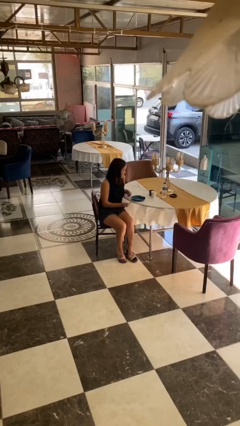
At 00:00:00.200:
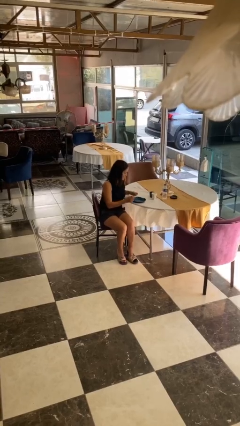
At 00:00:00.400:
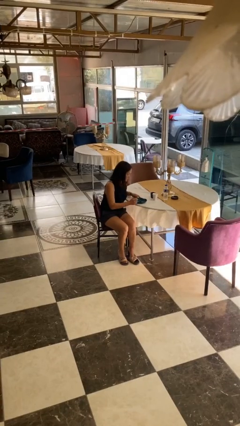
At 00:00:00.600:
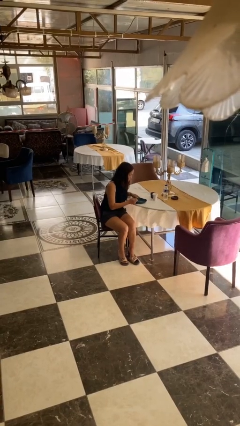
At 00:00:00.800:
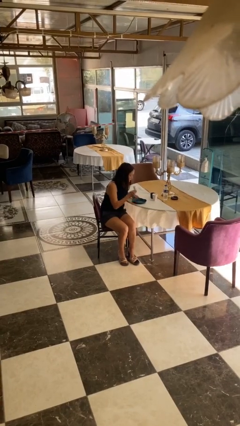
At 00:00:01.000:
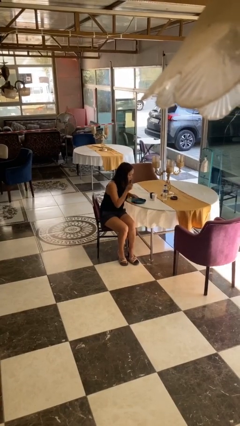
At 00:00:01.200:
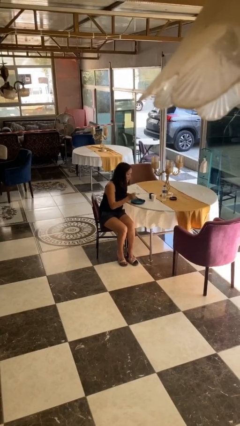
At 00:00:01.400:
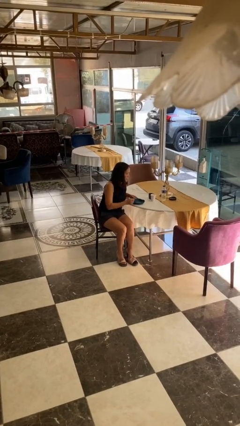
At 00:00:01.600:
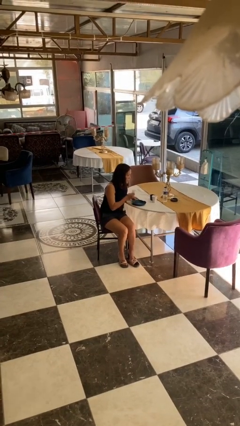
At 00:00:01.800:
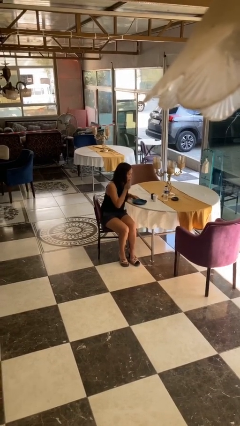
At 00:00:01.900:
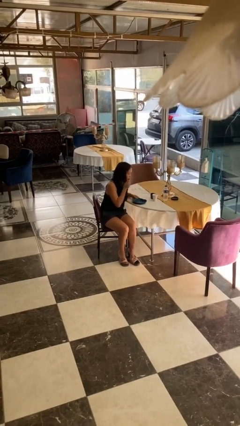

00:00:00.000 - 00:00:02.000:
person eats with utensil

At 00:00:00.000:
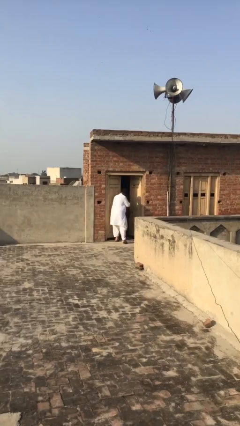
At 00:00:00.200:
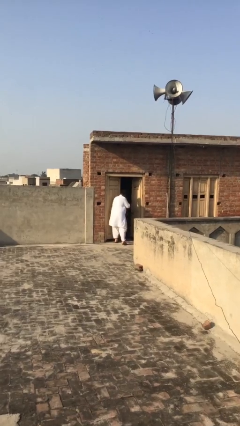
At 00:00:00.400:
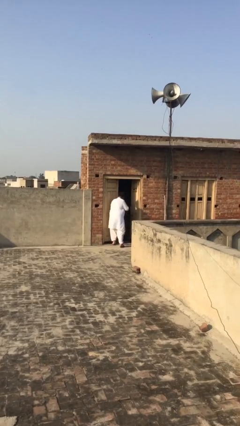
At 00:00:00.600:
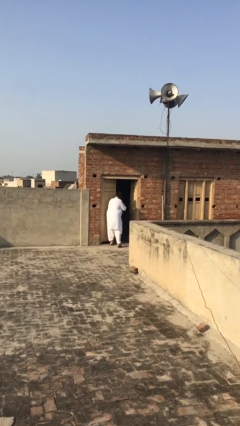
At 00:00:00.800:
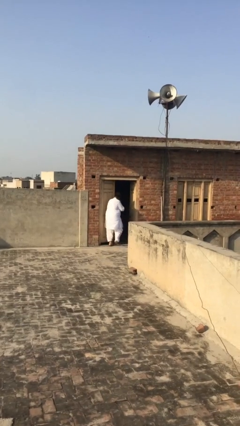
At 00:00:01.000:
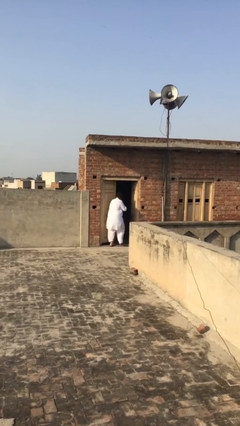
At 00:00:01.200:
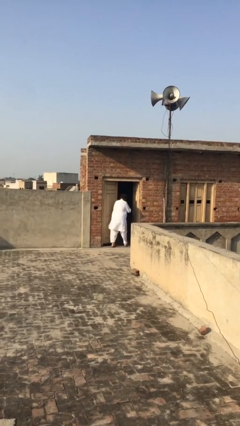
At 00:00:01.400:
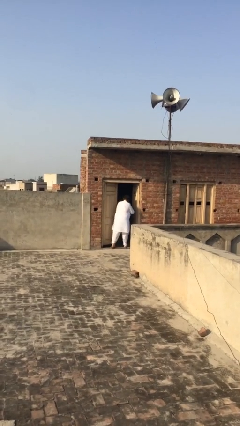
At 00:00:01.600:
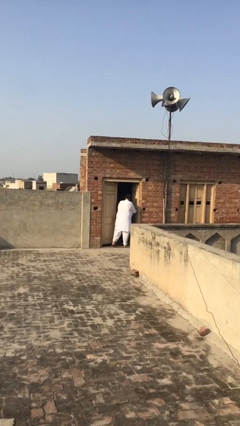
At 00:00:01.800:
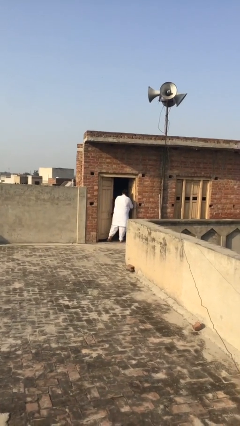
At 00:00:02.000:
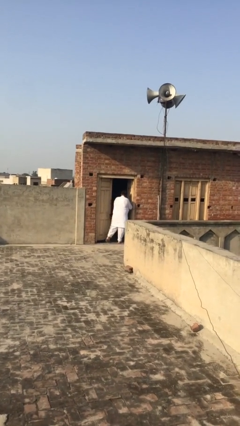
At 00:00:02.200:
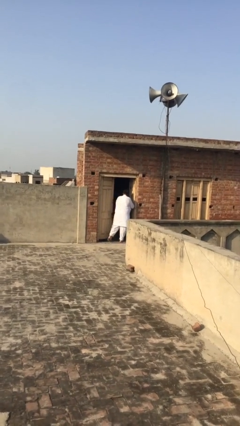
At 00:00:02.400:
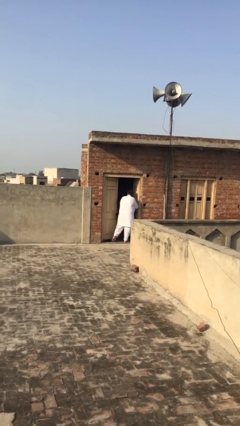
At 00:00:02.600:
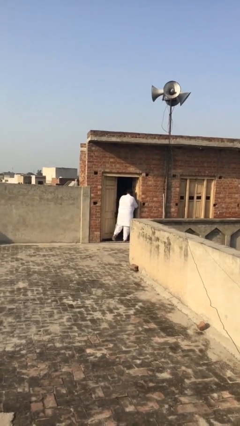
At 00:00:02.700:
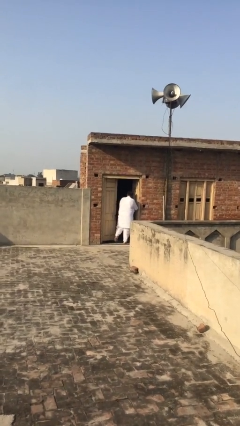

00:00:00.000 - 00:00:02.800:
person exits scene through structure

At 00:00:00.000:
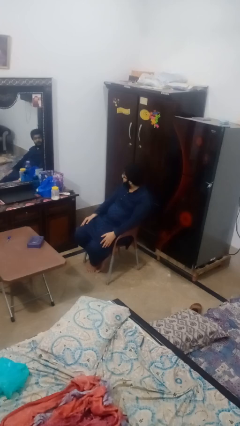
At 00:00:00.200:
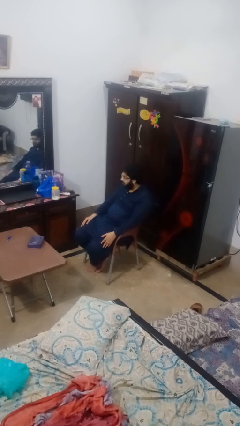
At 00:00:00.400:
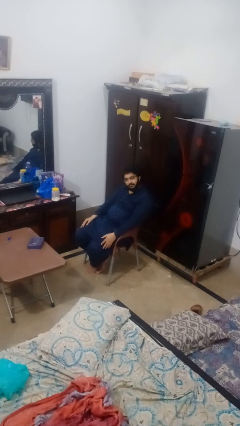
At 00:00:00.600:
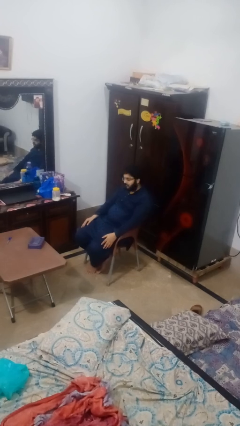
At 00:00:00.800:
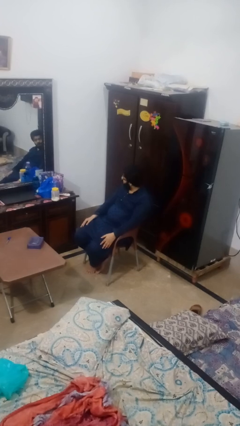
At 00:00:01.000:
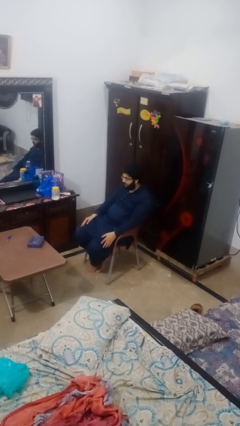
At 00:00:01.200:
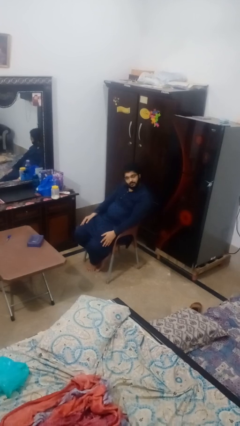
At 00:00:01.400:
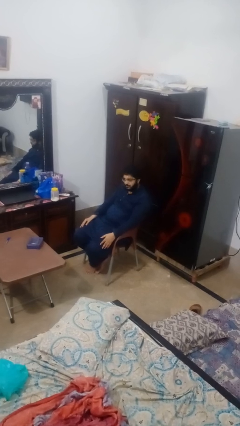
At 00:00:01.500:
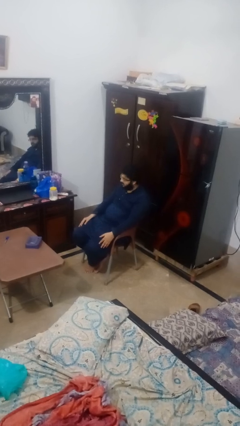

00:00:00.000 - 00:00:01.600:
person shakes head

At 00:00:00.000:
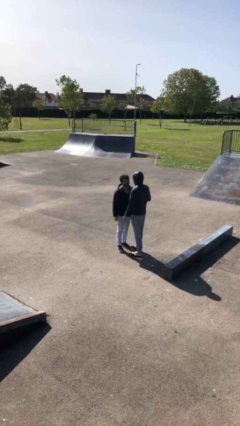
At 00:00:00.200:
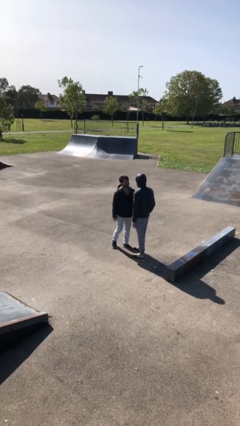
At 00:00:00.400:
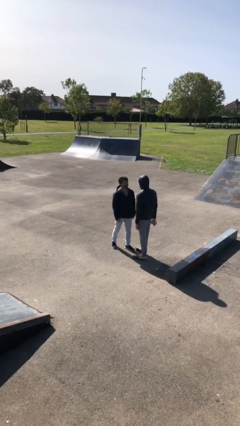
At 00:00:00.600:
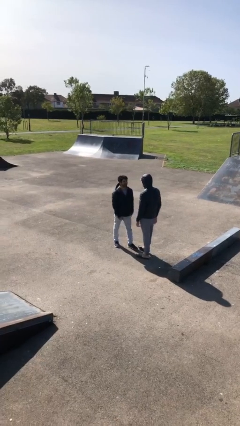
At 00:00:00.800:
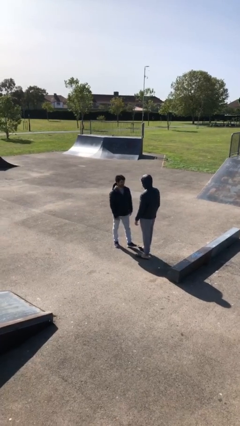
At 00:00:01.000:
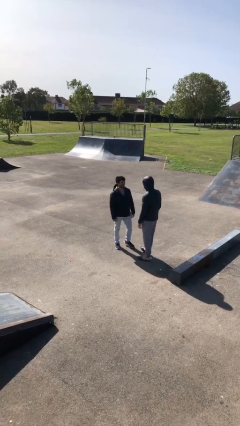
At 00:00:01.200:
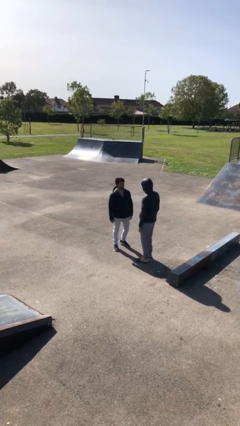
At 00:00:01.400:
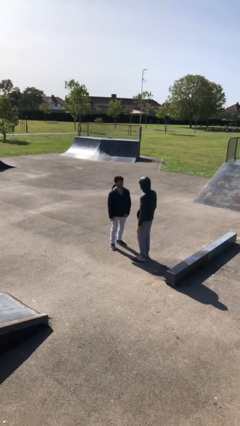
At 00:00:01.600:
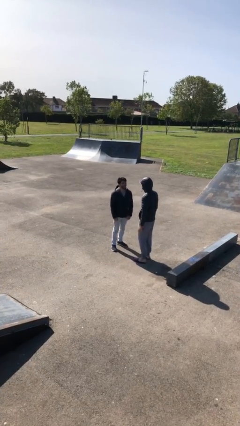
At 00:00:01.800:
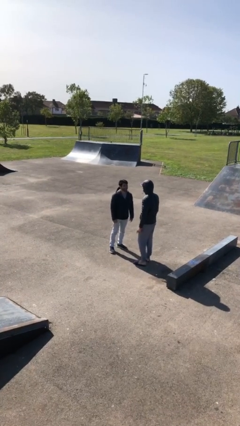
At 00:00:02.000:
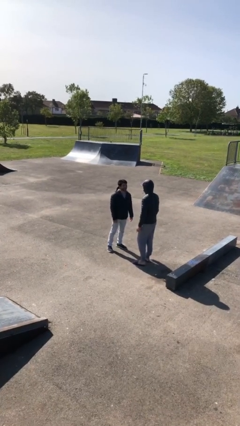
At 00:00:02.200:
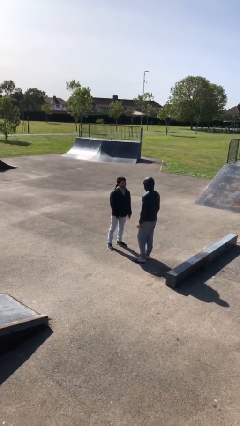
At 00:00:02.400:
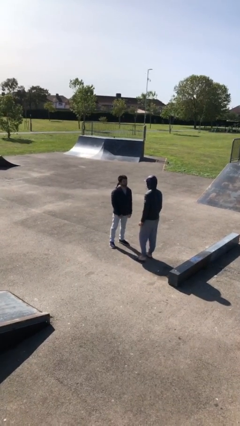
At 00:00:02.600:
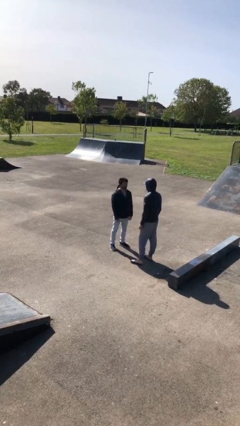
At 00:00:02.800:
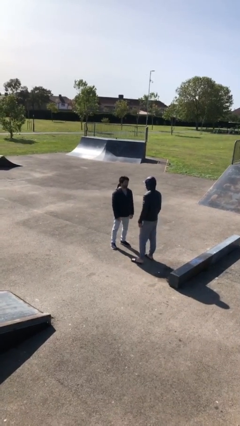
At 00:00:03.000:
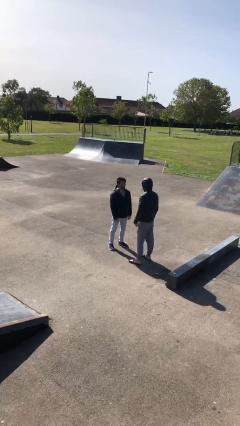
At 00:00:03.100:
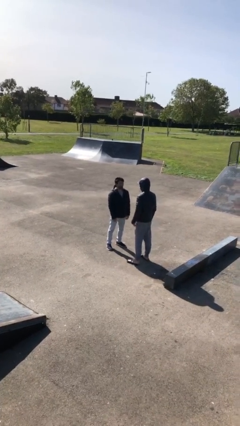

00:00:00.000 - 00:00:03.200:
person talks to person

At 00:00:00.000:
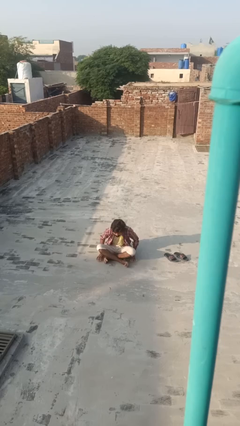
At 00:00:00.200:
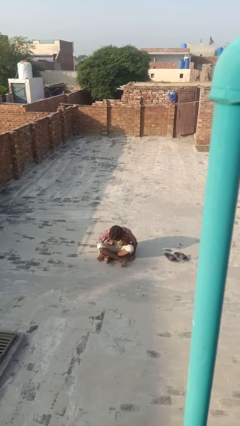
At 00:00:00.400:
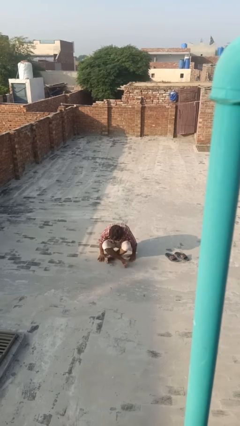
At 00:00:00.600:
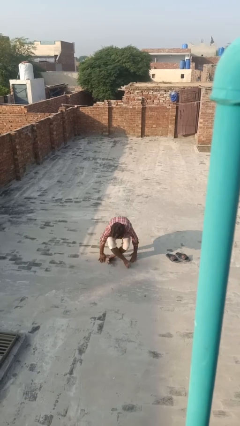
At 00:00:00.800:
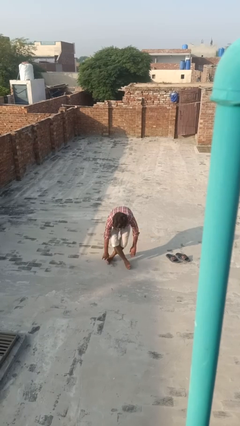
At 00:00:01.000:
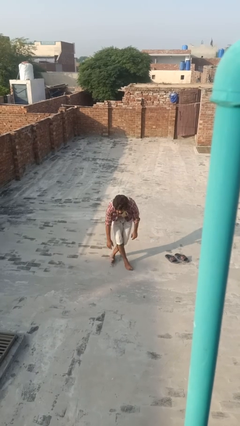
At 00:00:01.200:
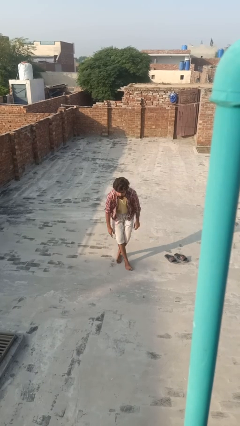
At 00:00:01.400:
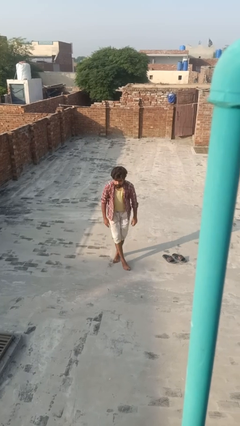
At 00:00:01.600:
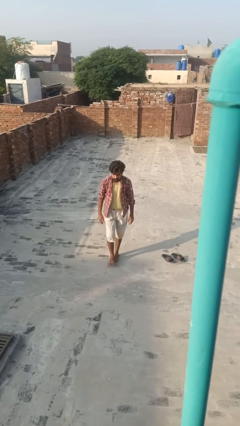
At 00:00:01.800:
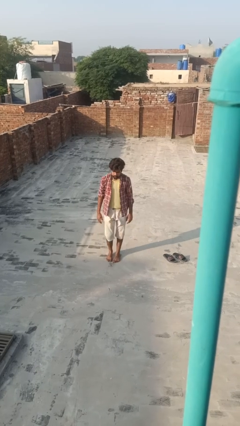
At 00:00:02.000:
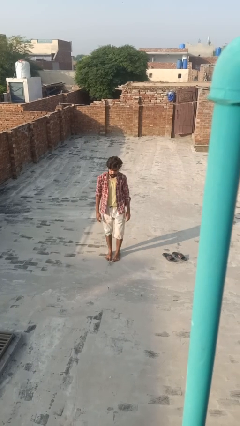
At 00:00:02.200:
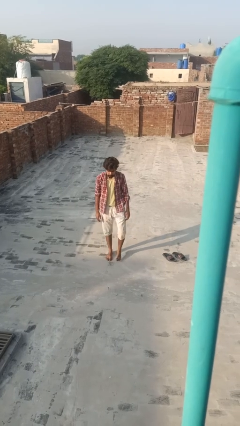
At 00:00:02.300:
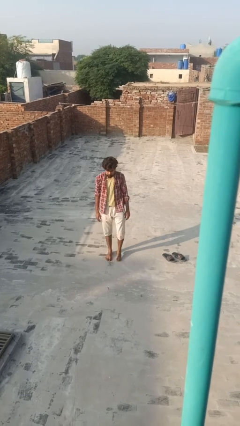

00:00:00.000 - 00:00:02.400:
person stands up from floor

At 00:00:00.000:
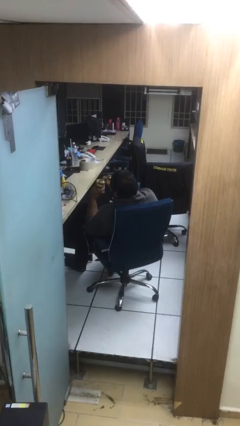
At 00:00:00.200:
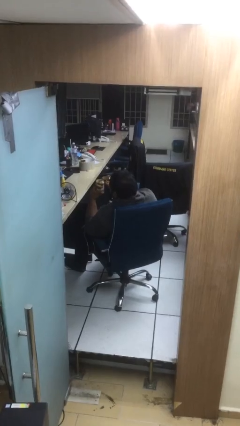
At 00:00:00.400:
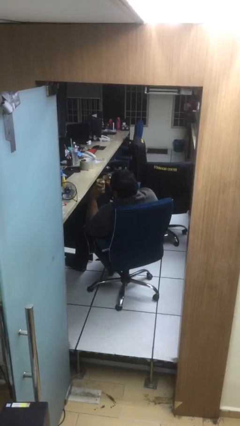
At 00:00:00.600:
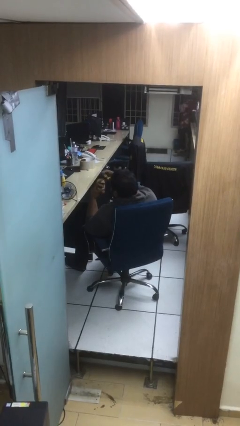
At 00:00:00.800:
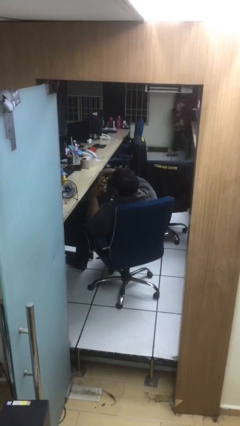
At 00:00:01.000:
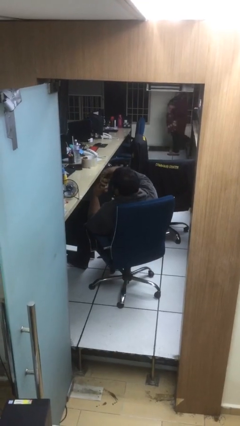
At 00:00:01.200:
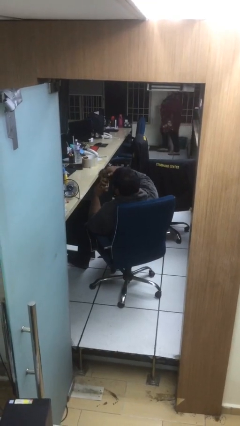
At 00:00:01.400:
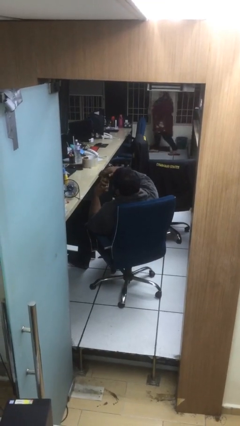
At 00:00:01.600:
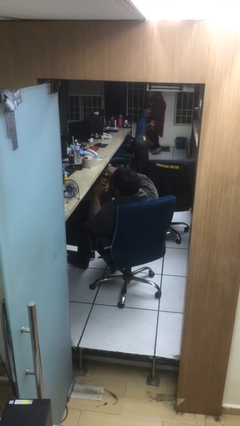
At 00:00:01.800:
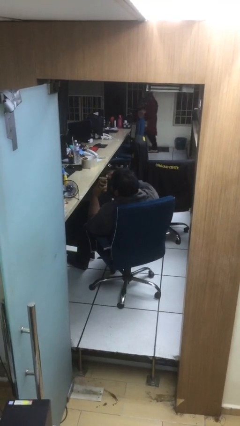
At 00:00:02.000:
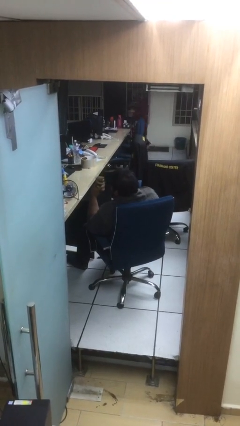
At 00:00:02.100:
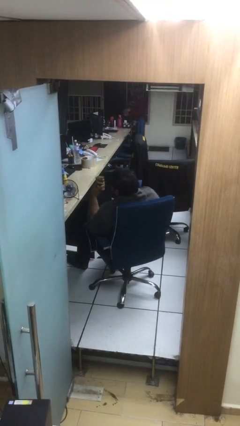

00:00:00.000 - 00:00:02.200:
person closes jar

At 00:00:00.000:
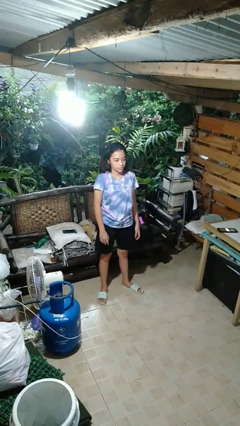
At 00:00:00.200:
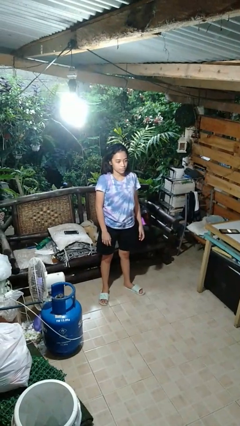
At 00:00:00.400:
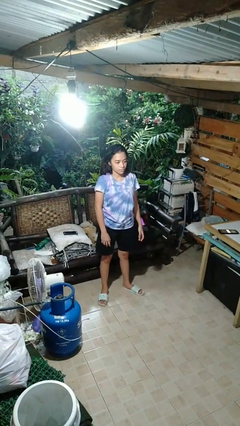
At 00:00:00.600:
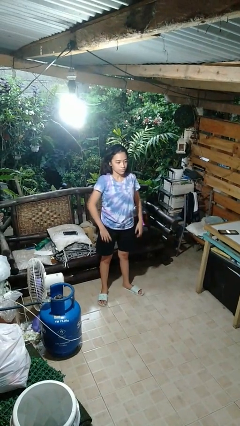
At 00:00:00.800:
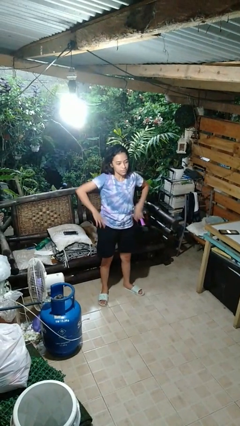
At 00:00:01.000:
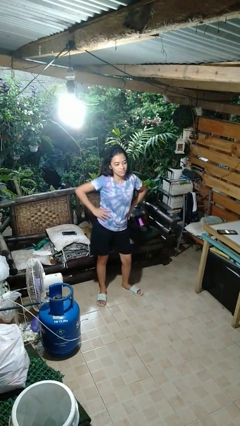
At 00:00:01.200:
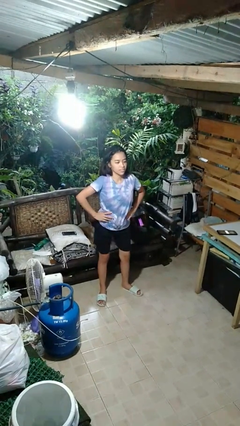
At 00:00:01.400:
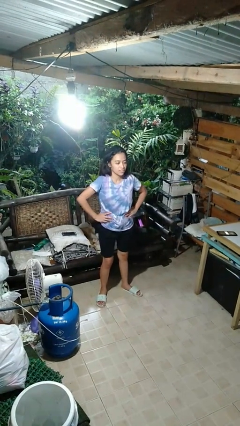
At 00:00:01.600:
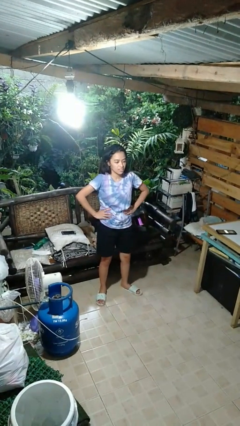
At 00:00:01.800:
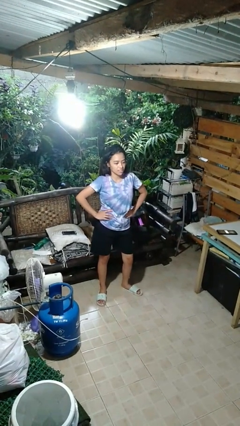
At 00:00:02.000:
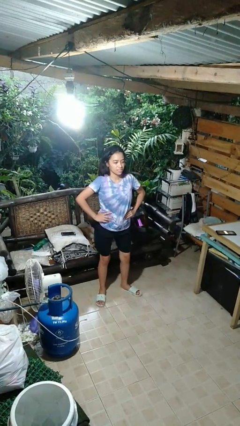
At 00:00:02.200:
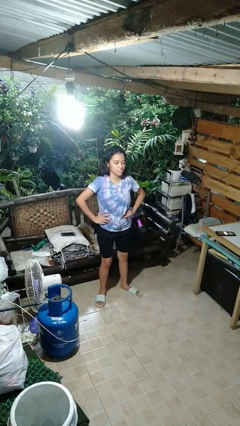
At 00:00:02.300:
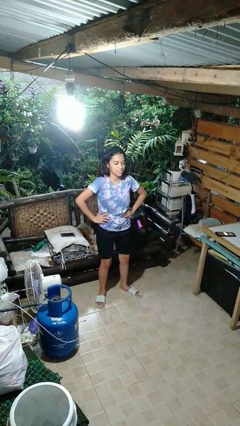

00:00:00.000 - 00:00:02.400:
person wiggles hips

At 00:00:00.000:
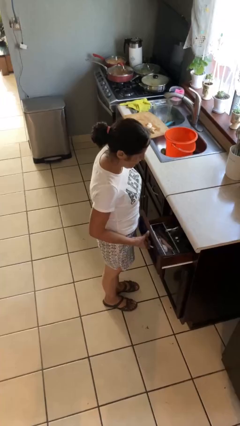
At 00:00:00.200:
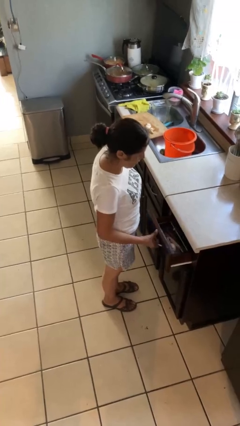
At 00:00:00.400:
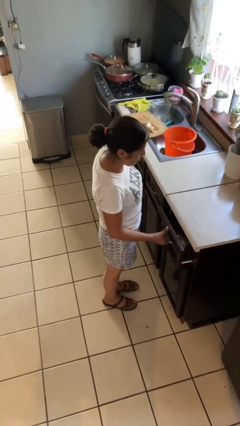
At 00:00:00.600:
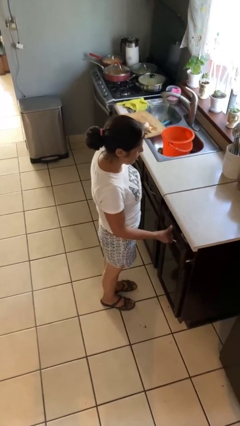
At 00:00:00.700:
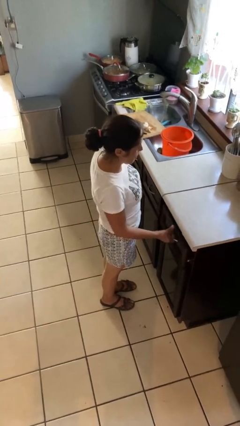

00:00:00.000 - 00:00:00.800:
person closes kitchen drawer
